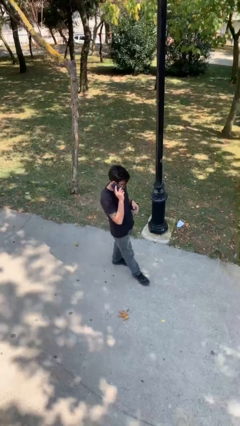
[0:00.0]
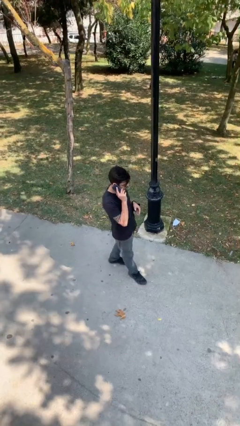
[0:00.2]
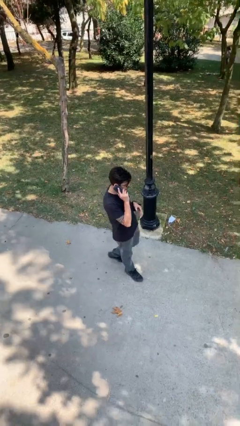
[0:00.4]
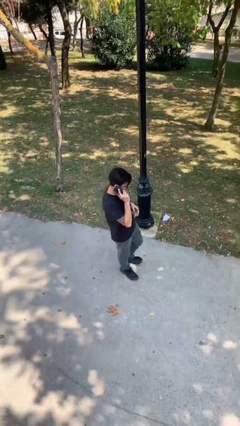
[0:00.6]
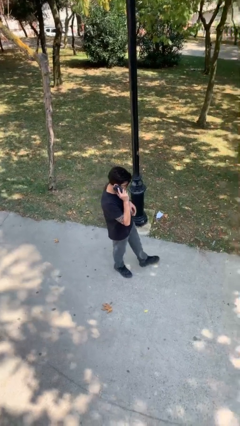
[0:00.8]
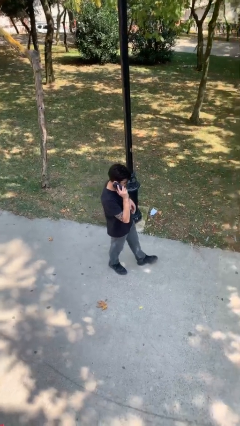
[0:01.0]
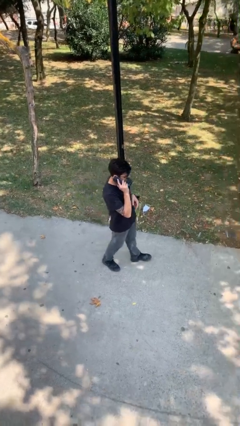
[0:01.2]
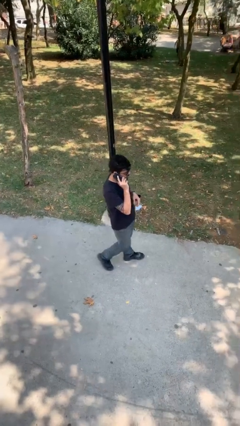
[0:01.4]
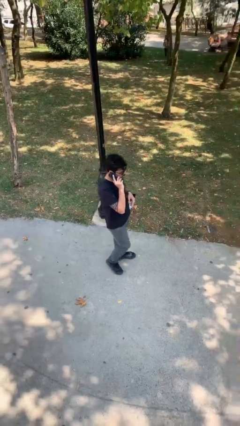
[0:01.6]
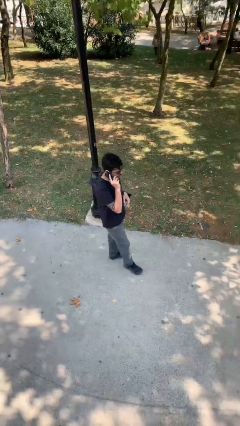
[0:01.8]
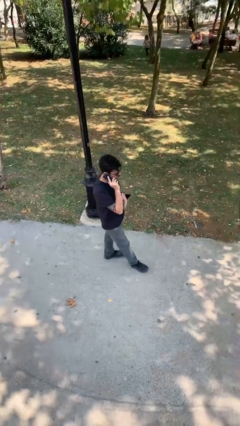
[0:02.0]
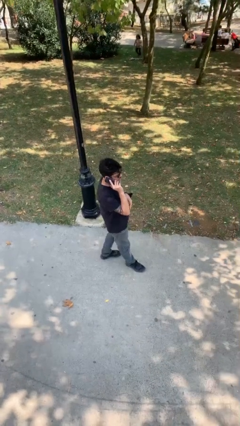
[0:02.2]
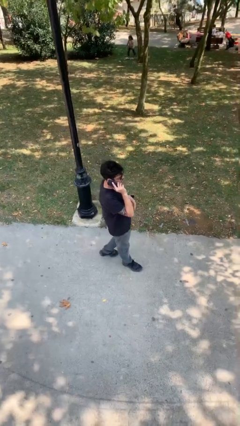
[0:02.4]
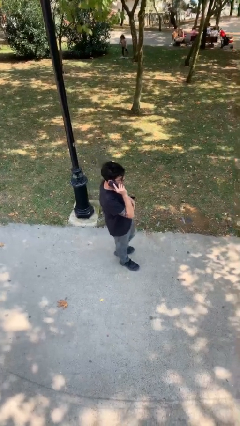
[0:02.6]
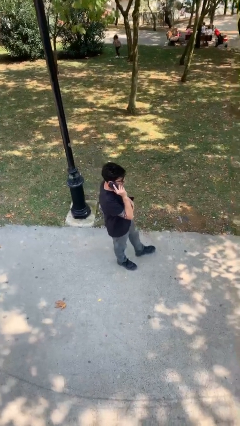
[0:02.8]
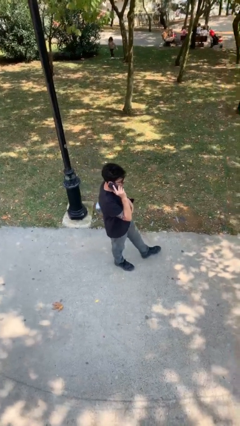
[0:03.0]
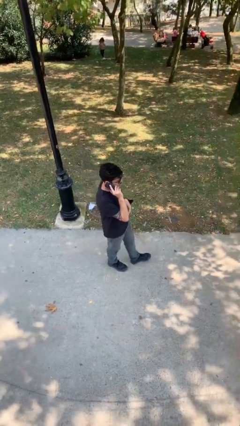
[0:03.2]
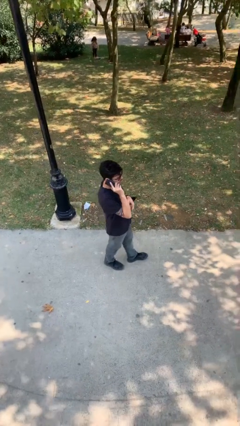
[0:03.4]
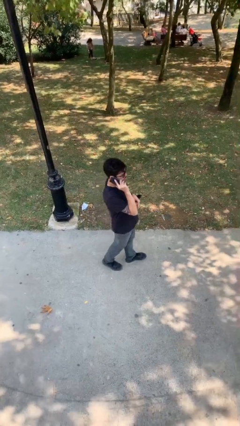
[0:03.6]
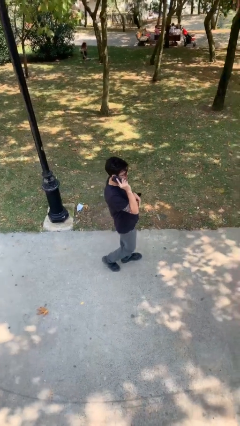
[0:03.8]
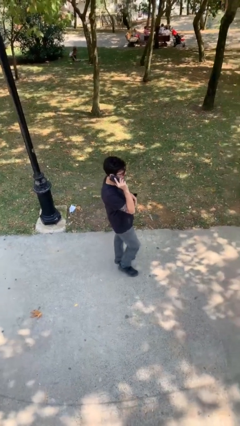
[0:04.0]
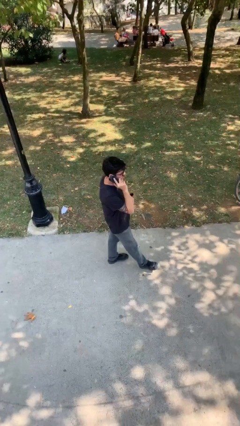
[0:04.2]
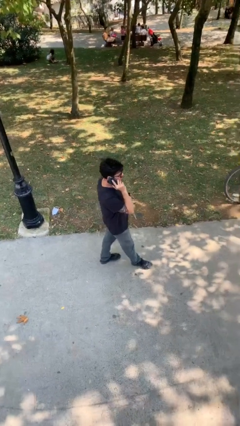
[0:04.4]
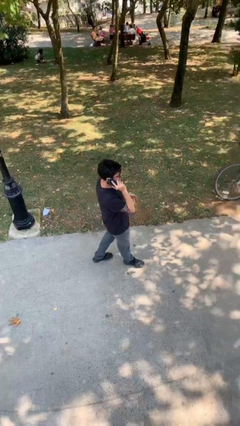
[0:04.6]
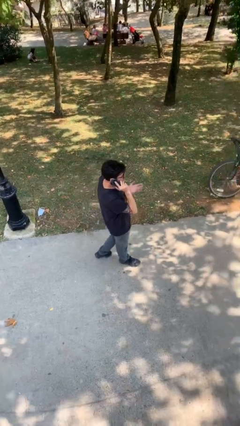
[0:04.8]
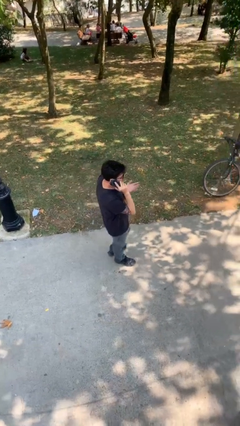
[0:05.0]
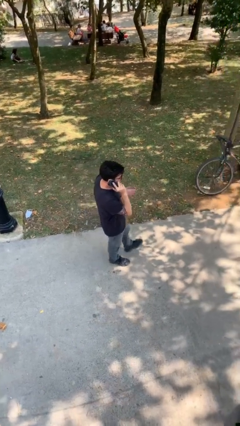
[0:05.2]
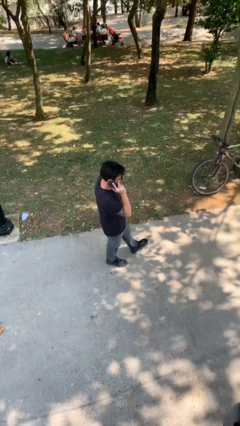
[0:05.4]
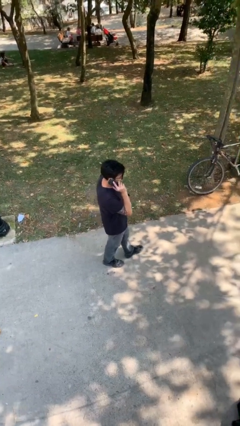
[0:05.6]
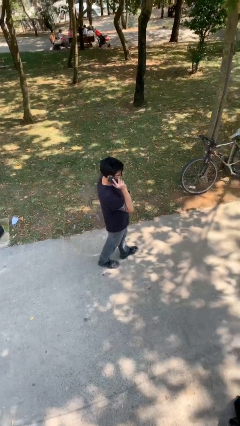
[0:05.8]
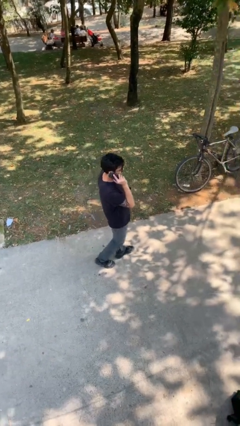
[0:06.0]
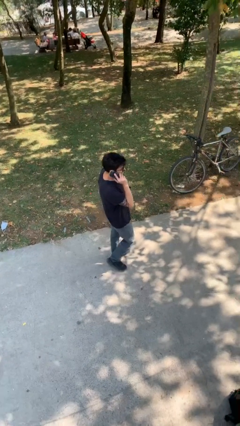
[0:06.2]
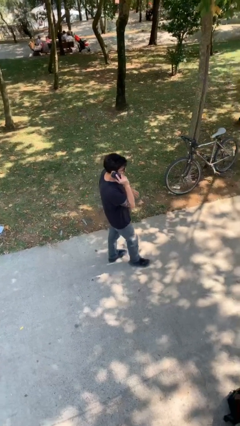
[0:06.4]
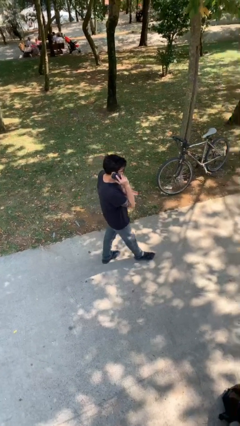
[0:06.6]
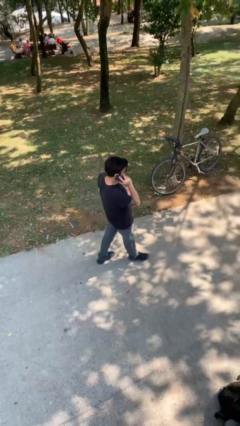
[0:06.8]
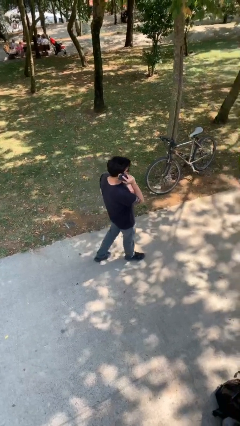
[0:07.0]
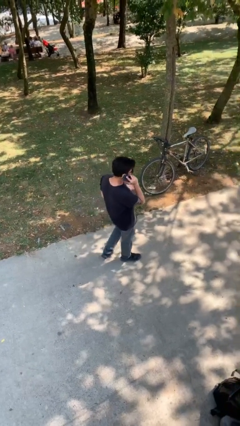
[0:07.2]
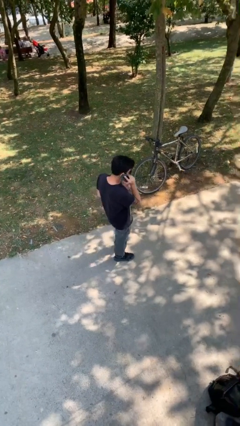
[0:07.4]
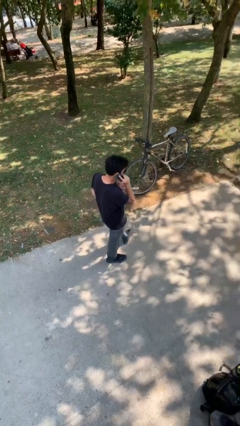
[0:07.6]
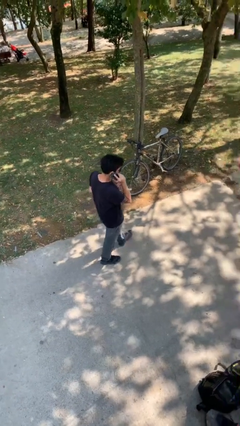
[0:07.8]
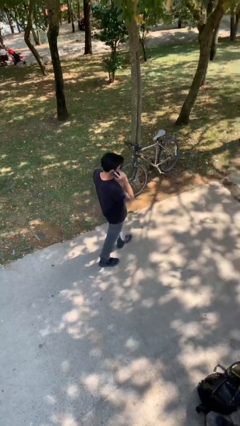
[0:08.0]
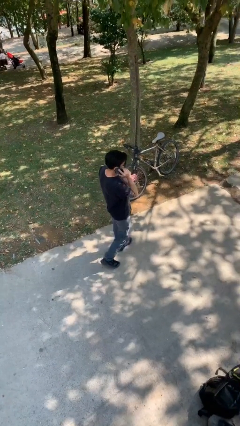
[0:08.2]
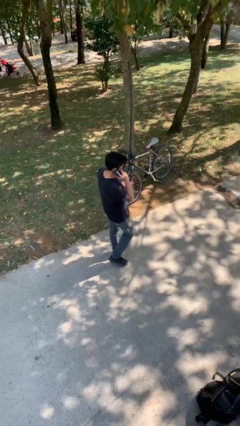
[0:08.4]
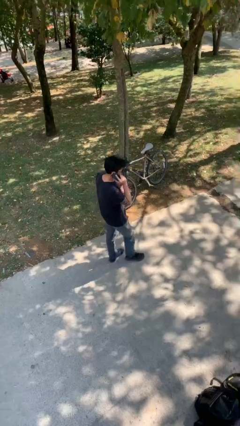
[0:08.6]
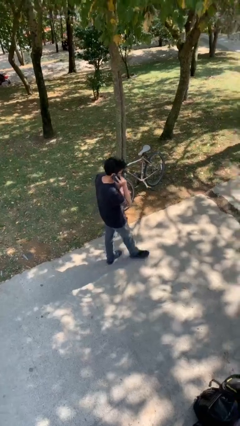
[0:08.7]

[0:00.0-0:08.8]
person talks on phone

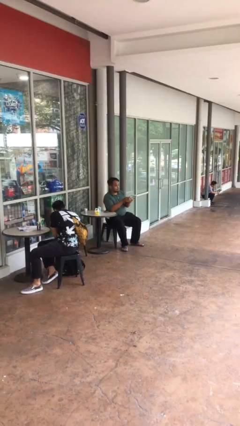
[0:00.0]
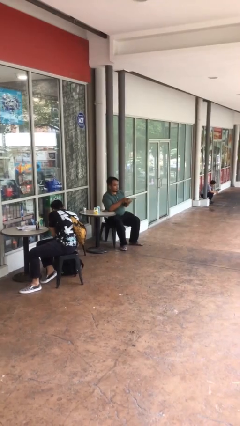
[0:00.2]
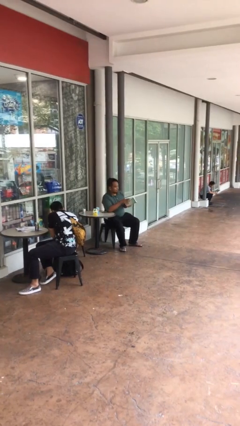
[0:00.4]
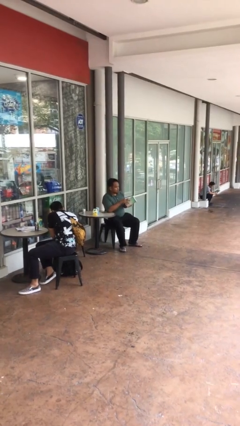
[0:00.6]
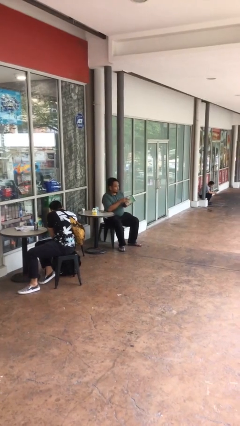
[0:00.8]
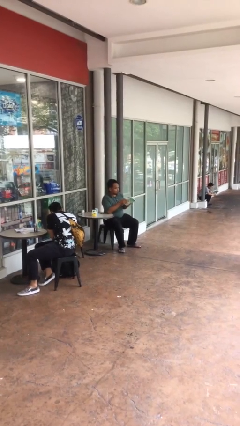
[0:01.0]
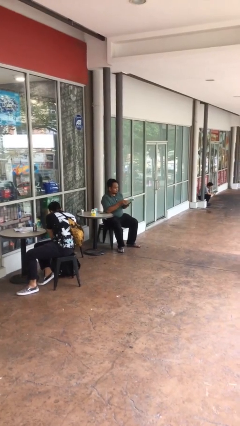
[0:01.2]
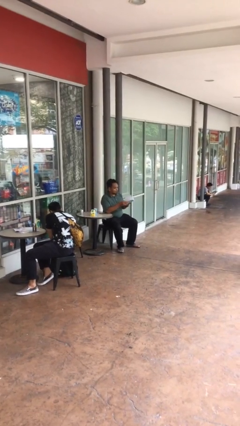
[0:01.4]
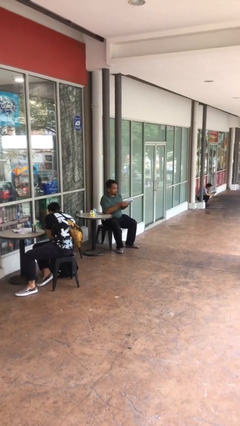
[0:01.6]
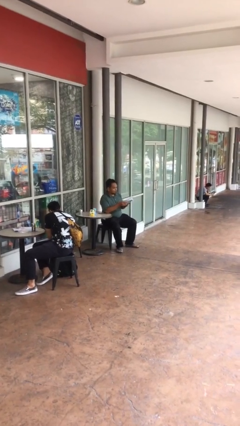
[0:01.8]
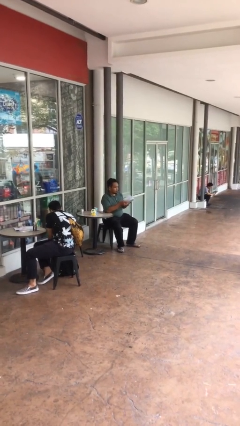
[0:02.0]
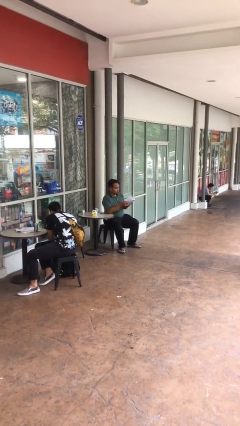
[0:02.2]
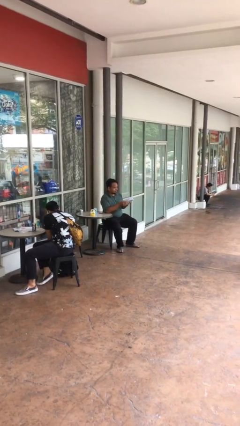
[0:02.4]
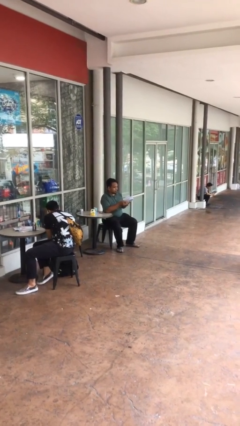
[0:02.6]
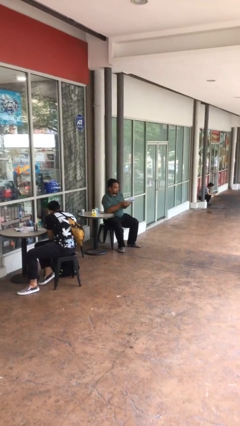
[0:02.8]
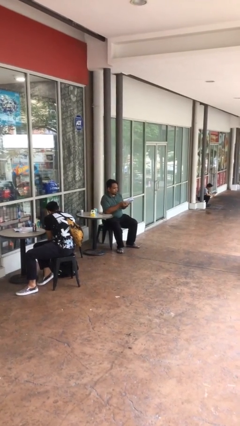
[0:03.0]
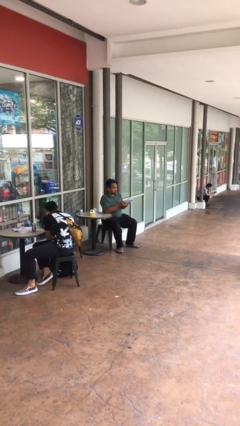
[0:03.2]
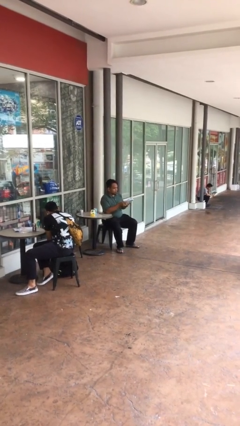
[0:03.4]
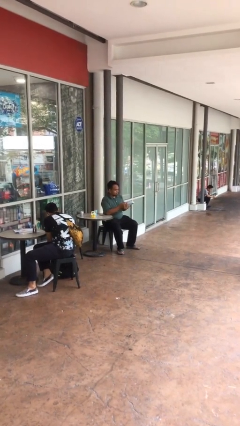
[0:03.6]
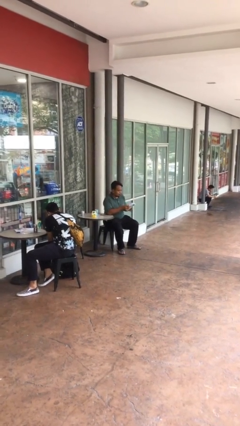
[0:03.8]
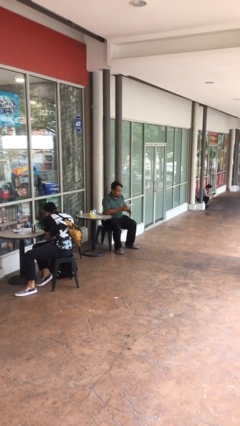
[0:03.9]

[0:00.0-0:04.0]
person reads document

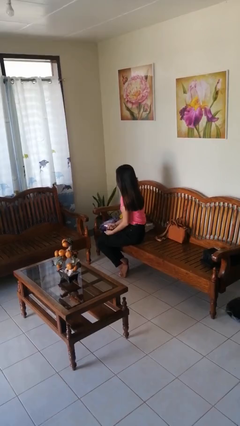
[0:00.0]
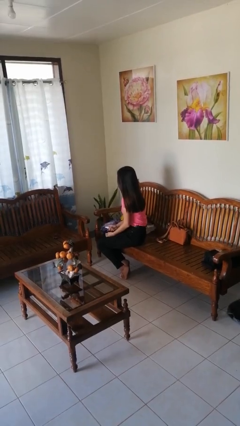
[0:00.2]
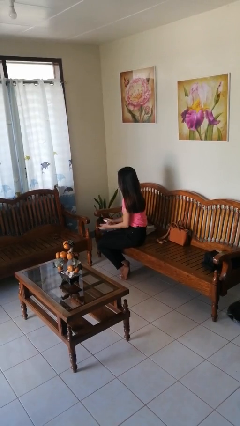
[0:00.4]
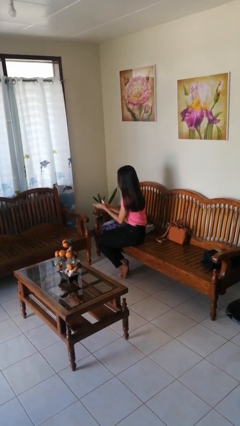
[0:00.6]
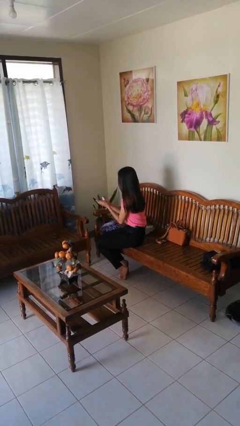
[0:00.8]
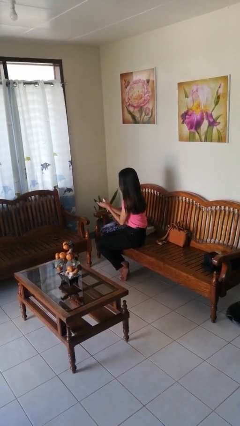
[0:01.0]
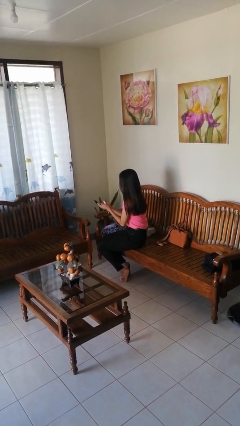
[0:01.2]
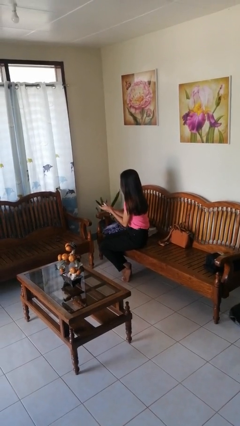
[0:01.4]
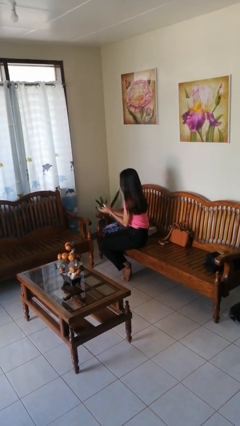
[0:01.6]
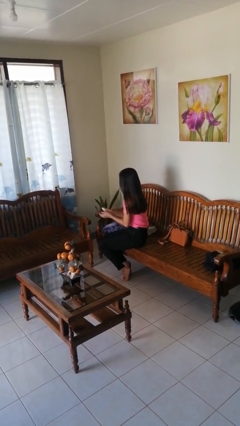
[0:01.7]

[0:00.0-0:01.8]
person sprays from bottle

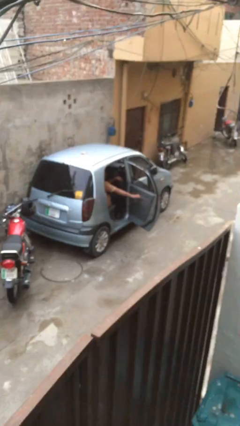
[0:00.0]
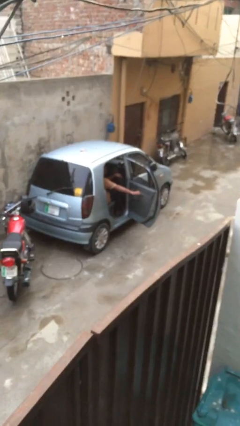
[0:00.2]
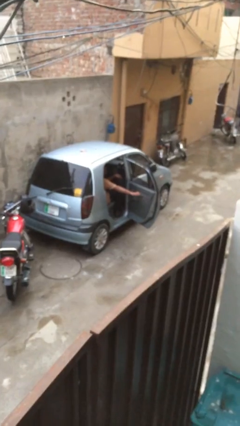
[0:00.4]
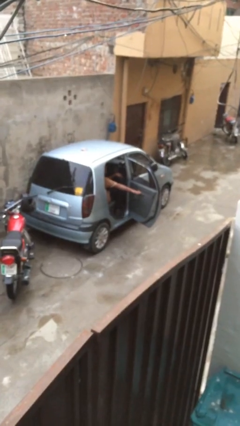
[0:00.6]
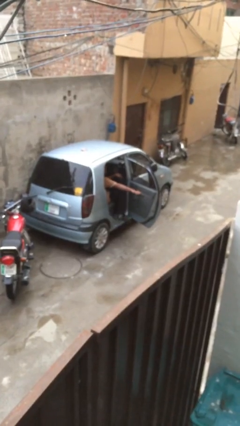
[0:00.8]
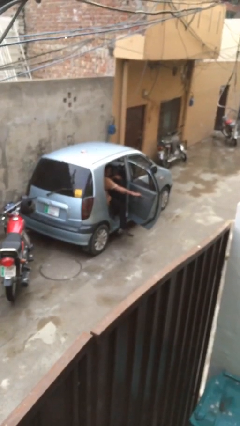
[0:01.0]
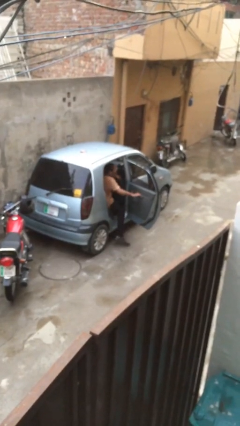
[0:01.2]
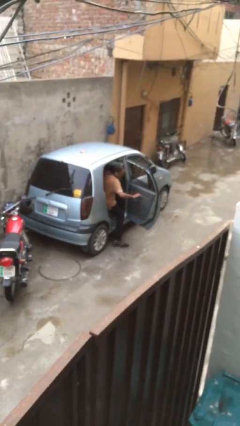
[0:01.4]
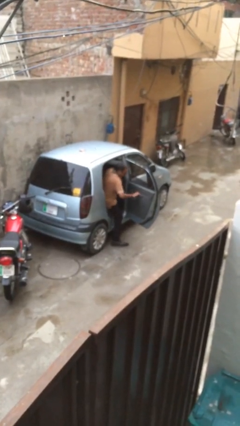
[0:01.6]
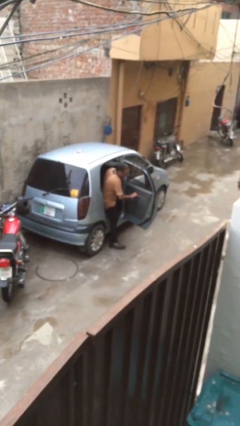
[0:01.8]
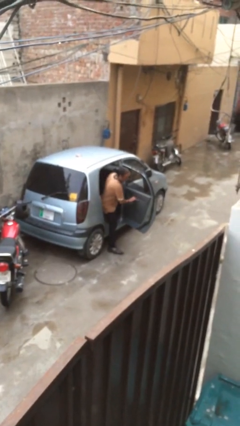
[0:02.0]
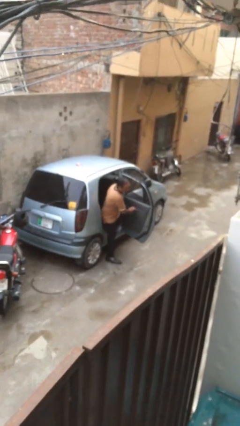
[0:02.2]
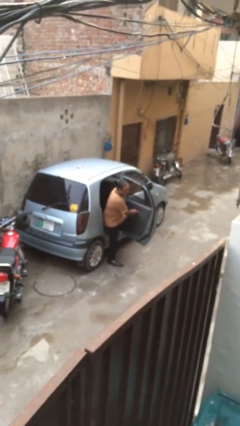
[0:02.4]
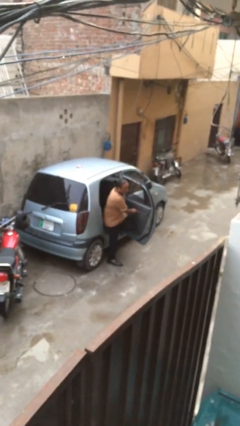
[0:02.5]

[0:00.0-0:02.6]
person exits car
